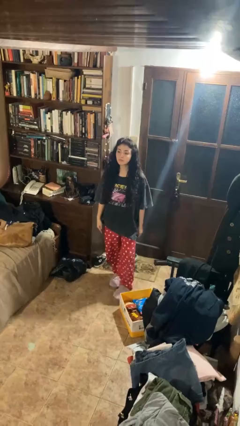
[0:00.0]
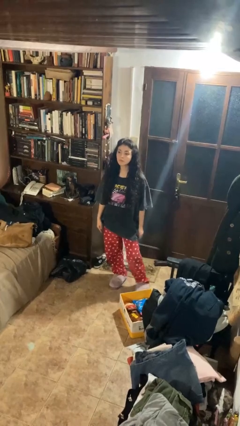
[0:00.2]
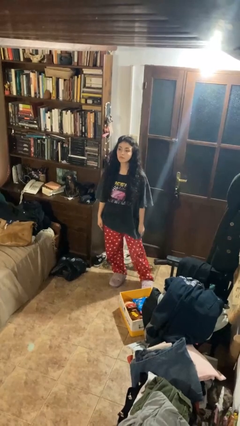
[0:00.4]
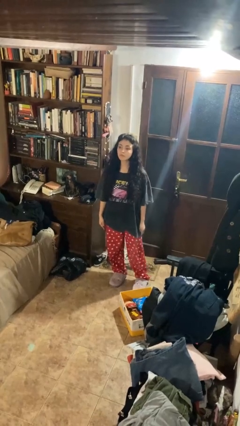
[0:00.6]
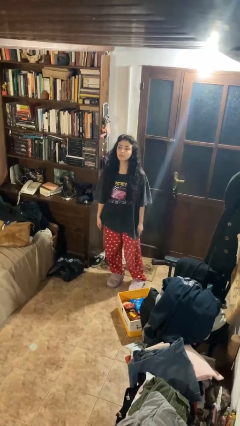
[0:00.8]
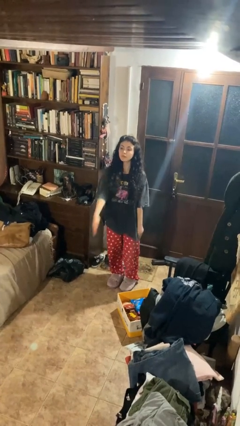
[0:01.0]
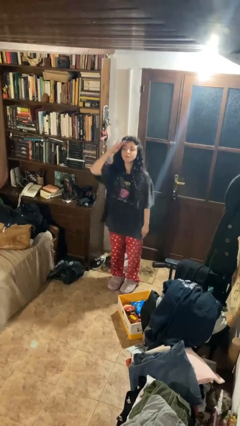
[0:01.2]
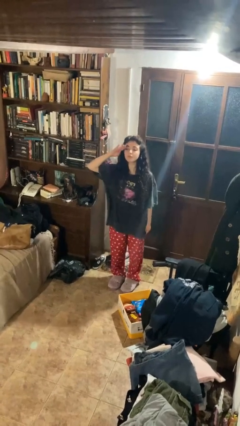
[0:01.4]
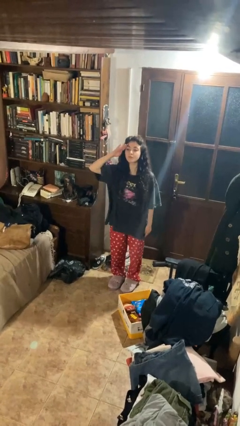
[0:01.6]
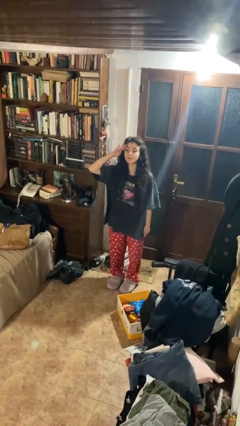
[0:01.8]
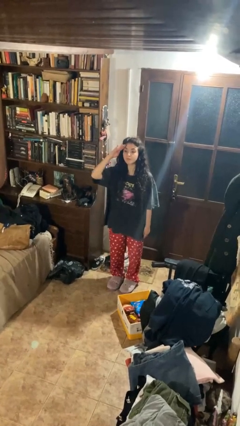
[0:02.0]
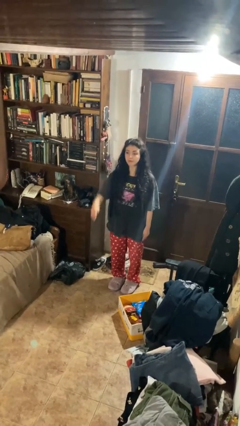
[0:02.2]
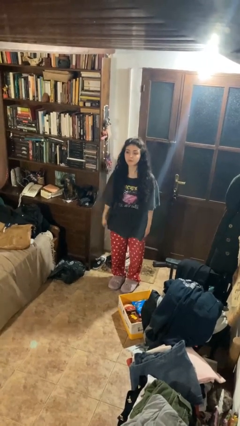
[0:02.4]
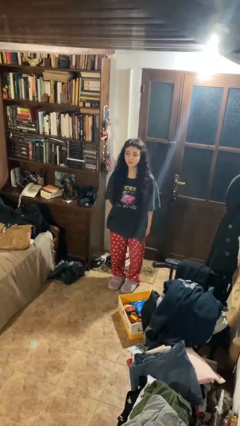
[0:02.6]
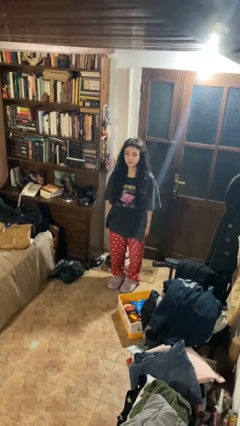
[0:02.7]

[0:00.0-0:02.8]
person salutes

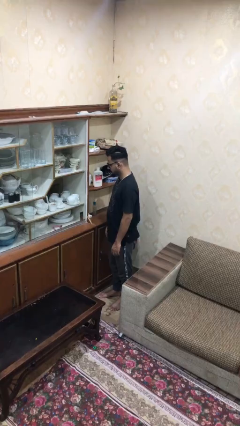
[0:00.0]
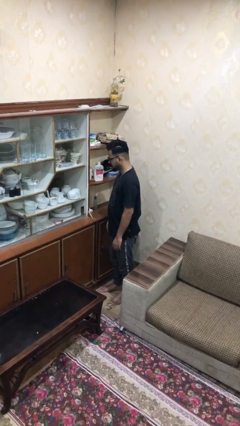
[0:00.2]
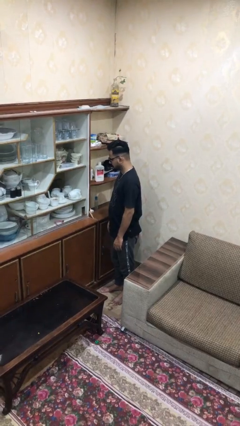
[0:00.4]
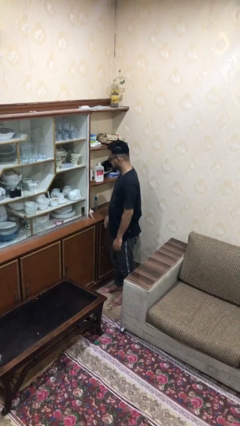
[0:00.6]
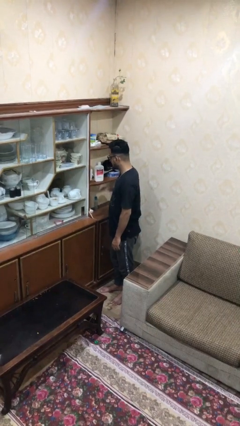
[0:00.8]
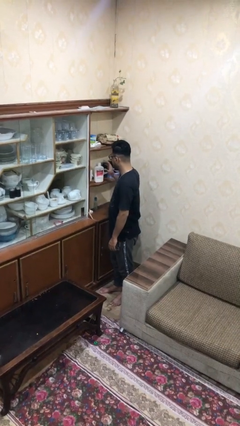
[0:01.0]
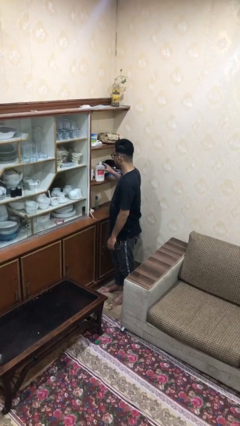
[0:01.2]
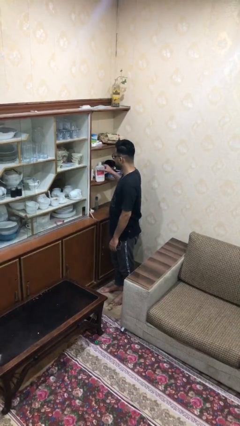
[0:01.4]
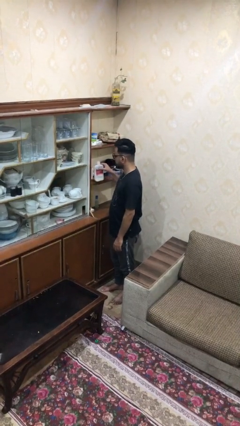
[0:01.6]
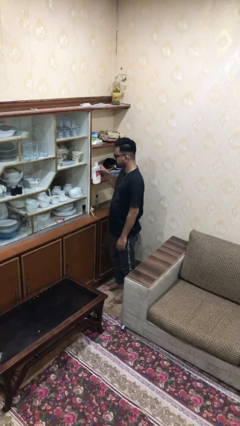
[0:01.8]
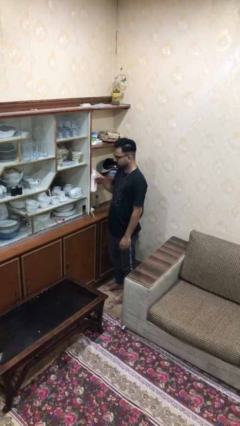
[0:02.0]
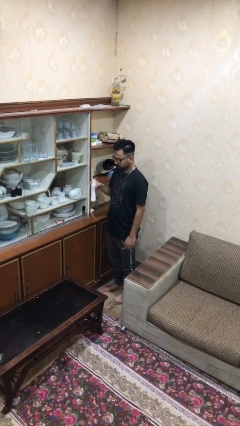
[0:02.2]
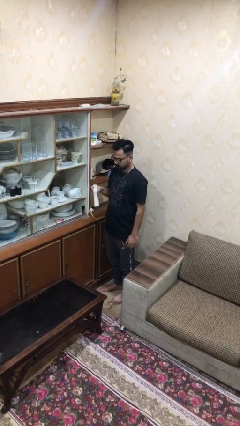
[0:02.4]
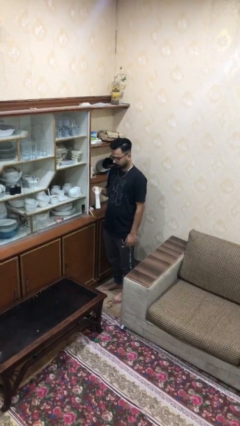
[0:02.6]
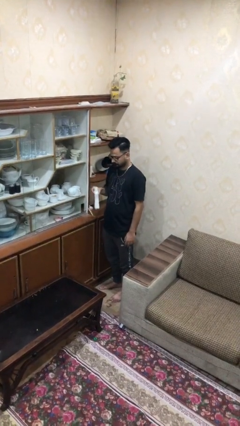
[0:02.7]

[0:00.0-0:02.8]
person picks up object from shelf

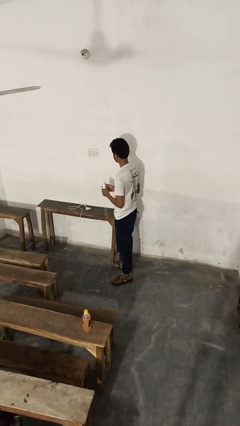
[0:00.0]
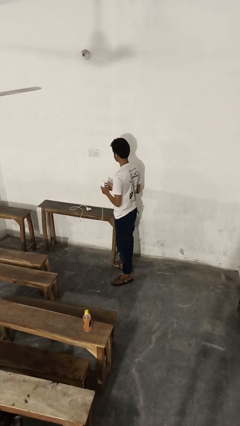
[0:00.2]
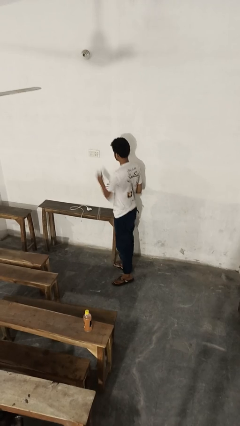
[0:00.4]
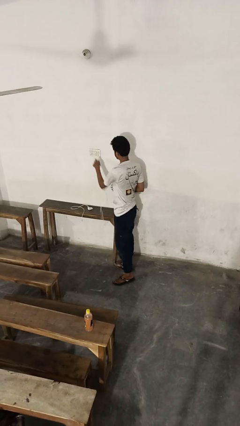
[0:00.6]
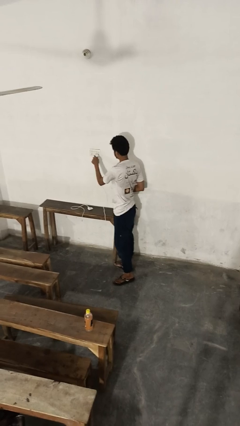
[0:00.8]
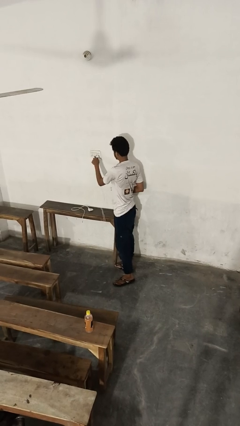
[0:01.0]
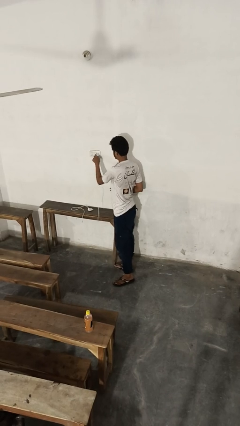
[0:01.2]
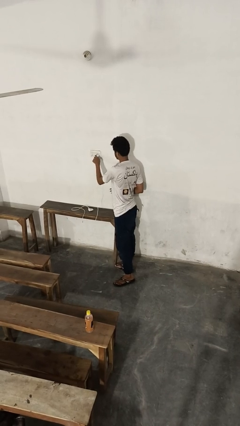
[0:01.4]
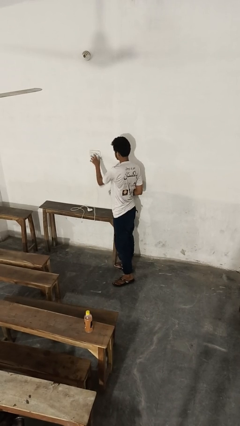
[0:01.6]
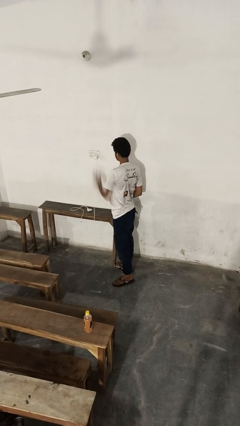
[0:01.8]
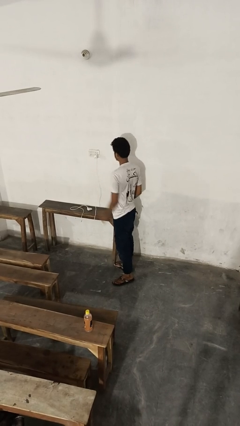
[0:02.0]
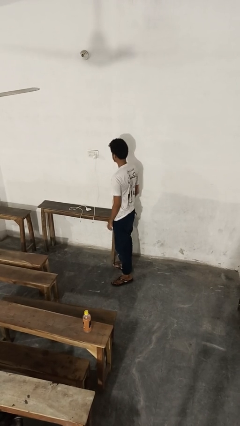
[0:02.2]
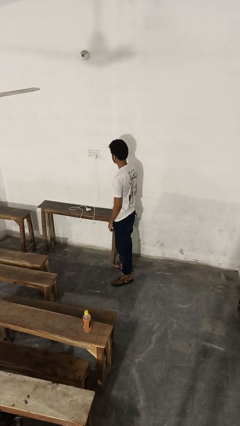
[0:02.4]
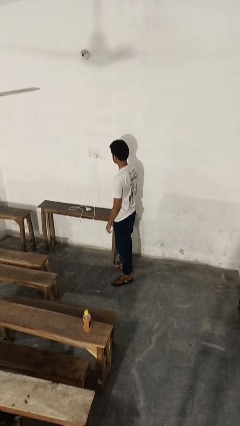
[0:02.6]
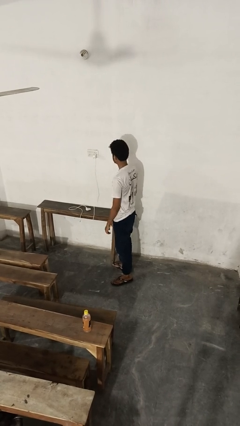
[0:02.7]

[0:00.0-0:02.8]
person plugs into electrical socket

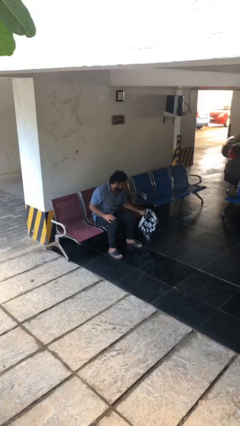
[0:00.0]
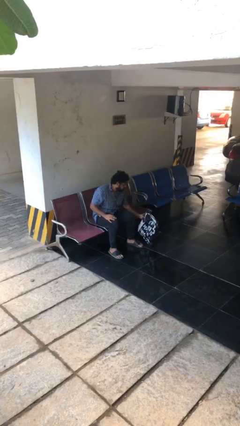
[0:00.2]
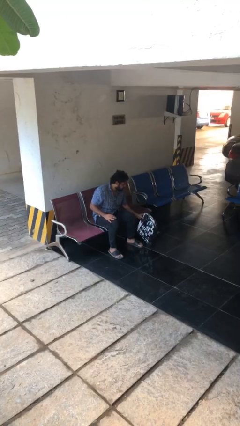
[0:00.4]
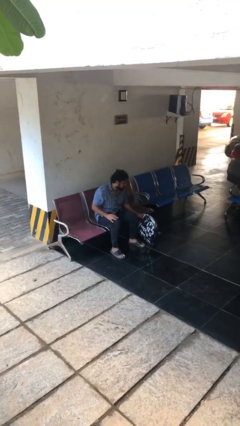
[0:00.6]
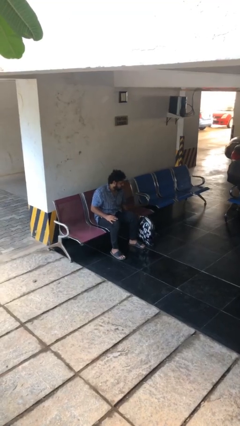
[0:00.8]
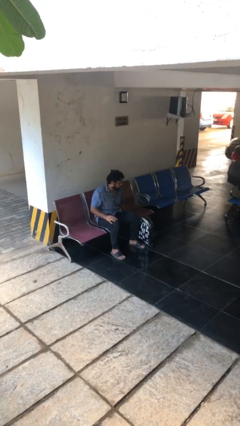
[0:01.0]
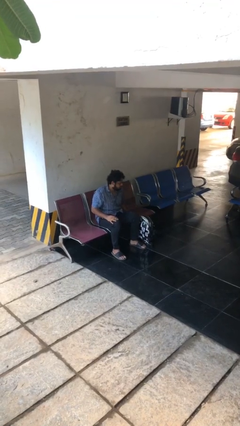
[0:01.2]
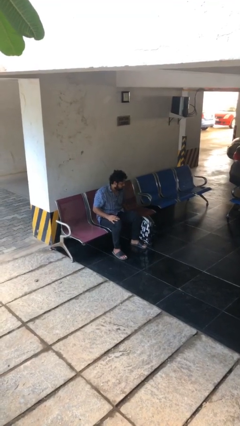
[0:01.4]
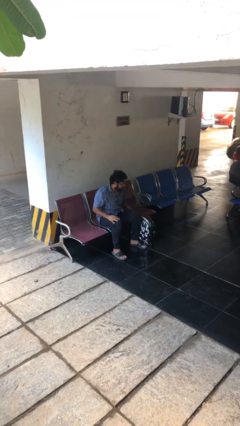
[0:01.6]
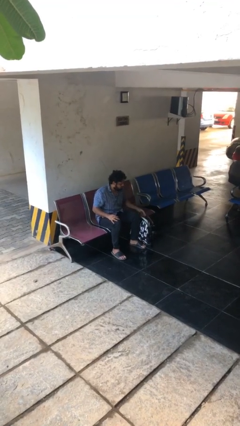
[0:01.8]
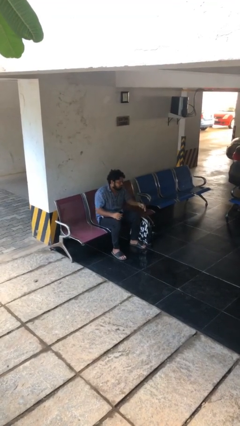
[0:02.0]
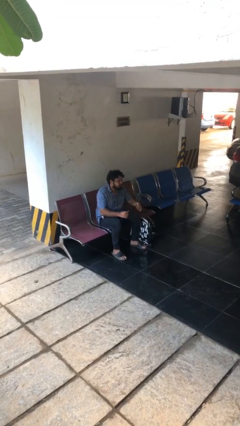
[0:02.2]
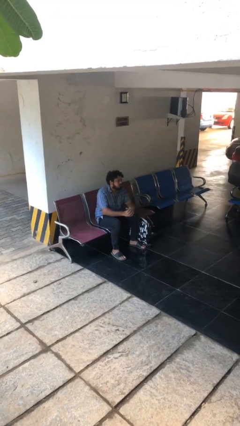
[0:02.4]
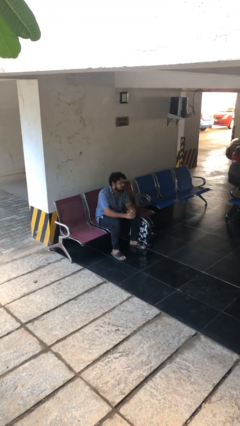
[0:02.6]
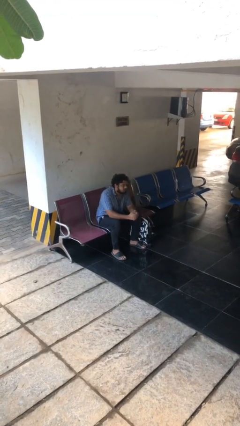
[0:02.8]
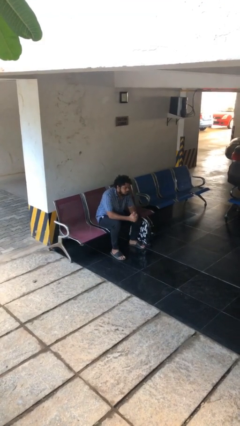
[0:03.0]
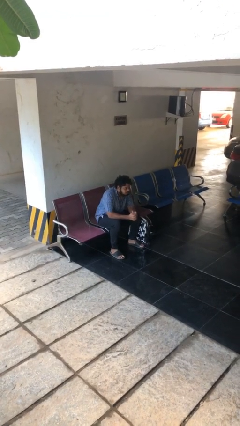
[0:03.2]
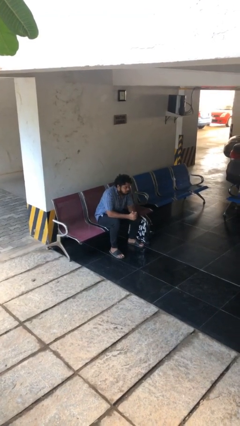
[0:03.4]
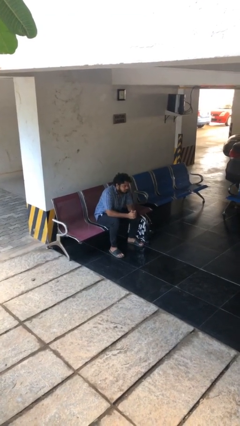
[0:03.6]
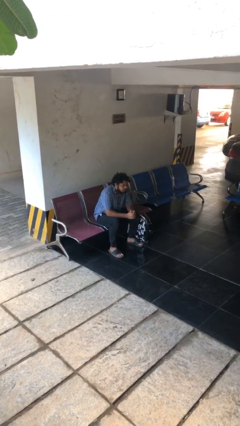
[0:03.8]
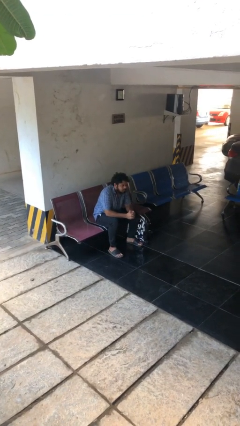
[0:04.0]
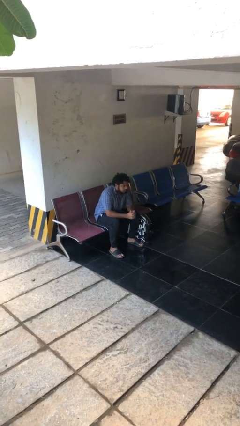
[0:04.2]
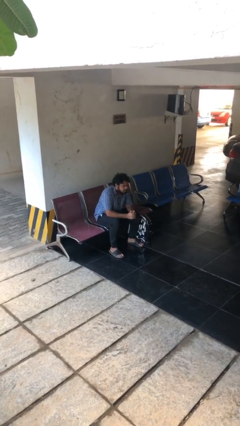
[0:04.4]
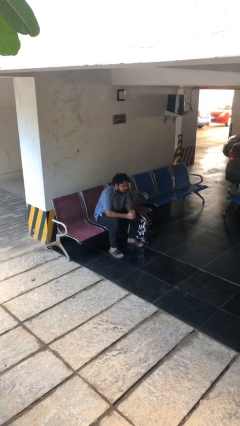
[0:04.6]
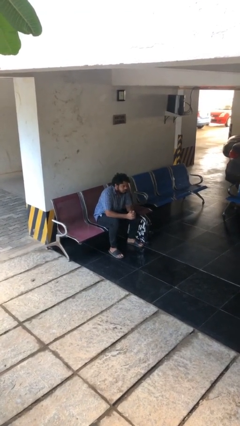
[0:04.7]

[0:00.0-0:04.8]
person puts down object on floor

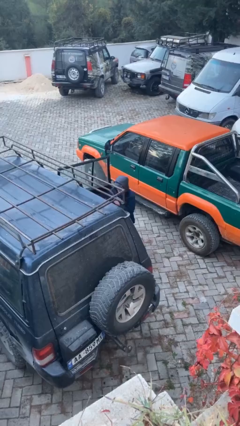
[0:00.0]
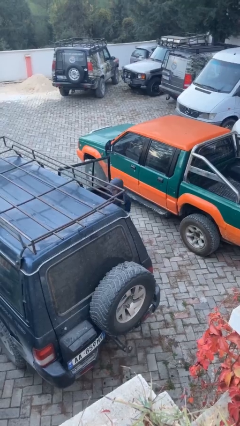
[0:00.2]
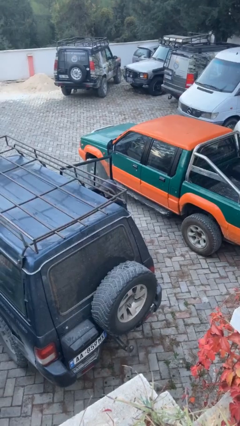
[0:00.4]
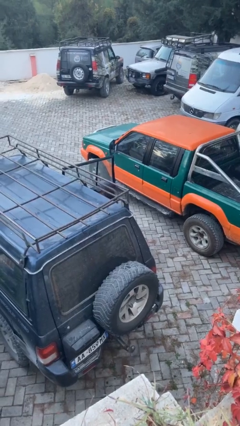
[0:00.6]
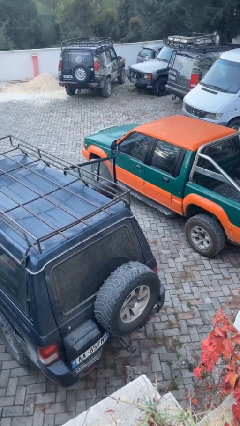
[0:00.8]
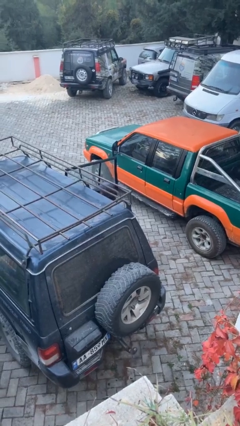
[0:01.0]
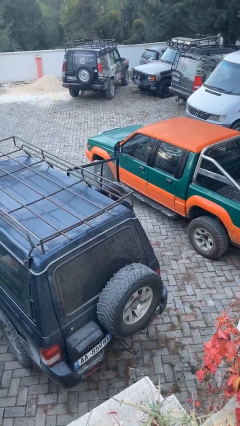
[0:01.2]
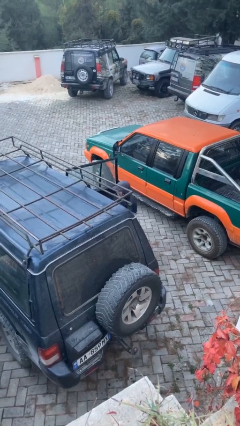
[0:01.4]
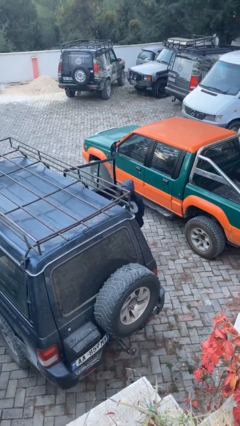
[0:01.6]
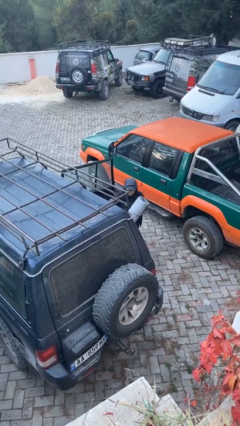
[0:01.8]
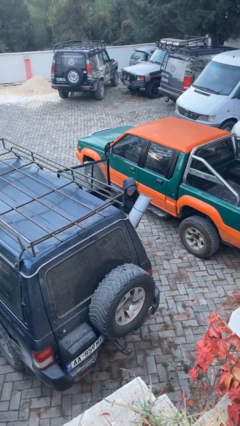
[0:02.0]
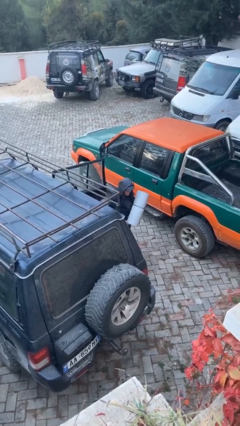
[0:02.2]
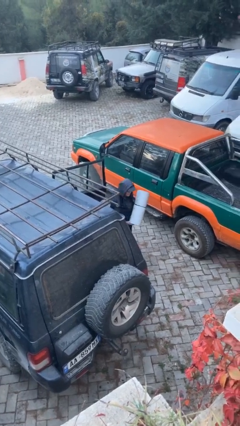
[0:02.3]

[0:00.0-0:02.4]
person unloads car

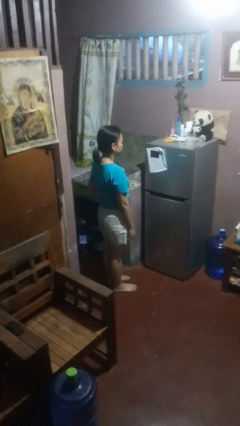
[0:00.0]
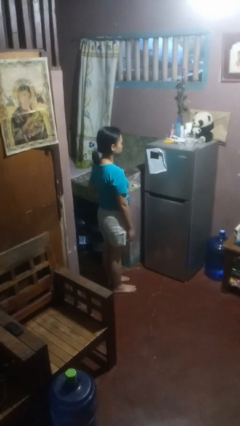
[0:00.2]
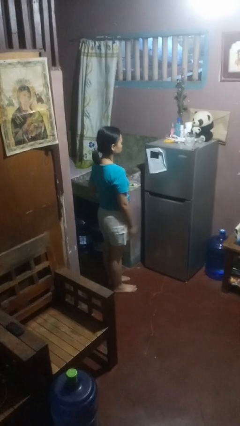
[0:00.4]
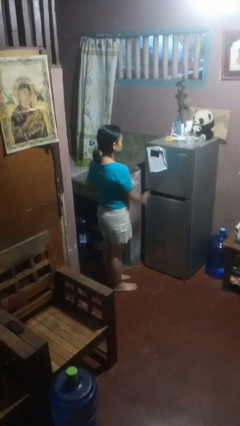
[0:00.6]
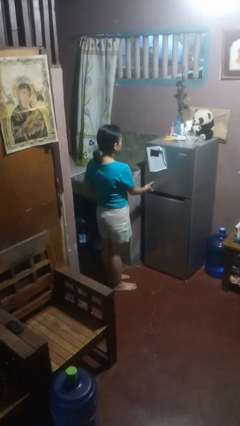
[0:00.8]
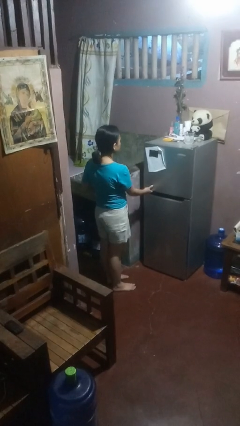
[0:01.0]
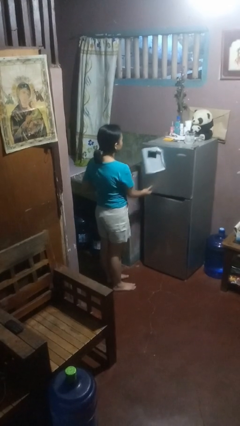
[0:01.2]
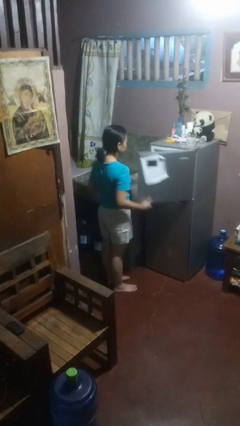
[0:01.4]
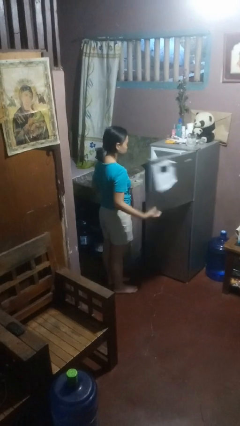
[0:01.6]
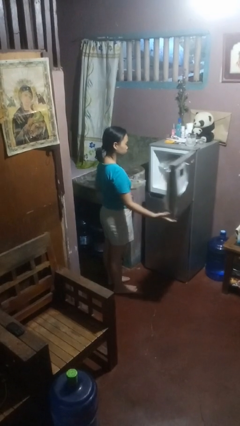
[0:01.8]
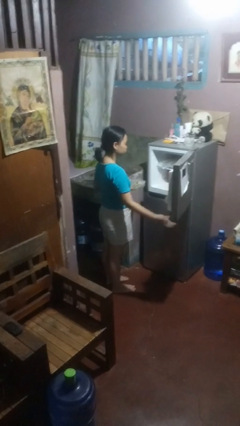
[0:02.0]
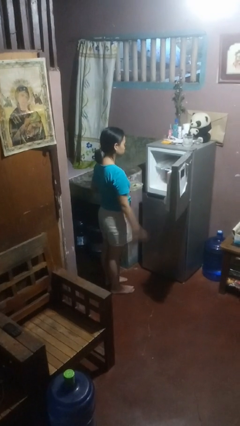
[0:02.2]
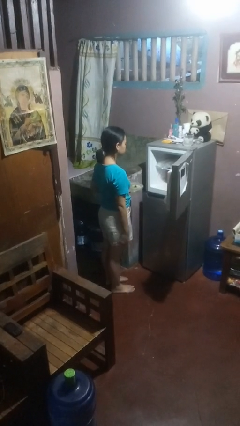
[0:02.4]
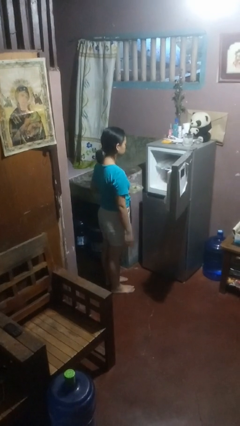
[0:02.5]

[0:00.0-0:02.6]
person opens refrigerator
